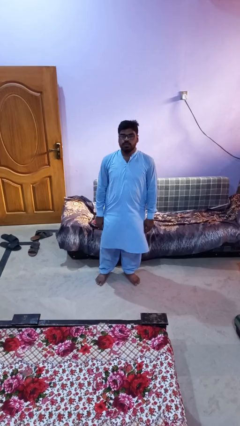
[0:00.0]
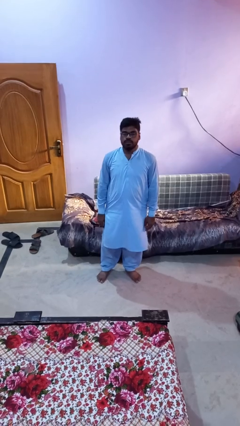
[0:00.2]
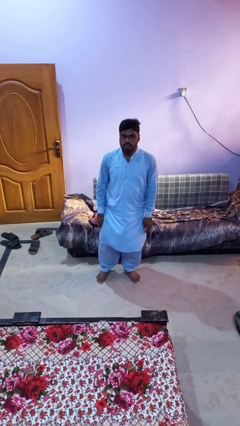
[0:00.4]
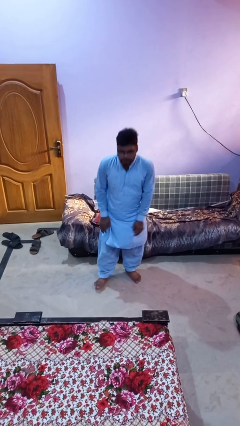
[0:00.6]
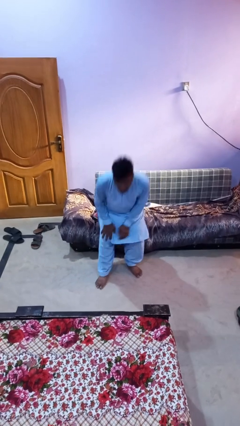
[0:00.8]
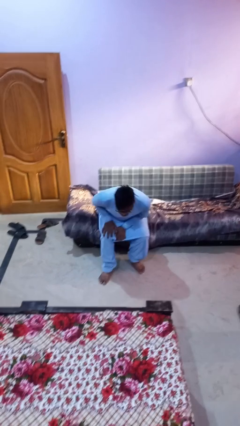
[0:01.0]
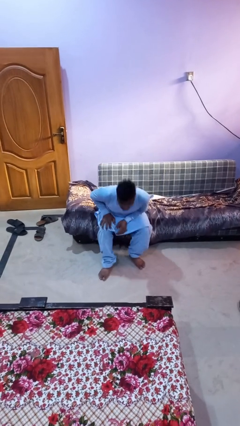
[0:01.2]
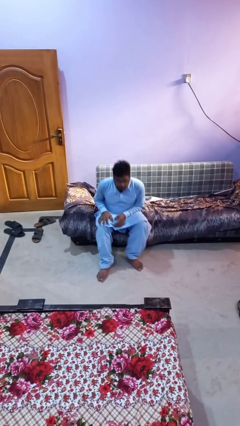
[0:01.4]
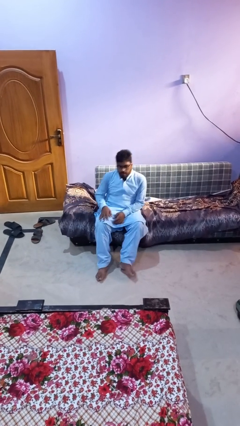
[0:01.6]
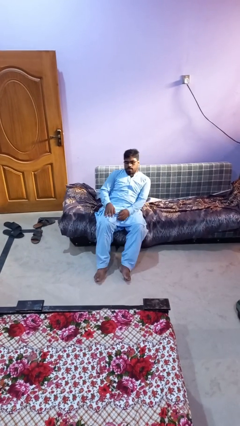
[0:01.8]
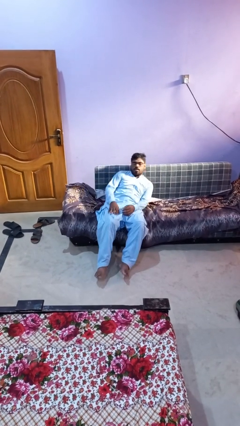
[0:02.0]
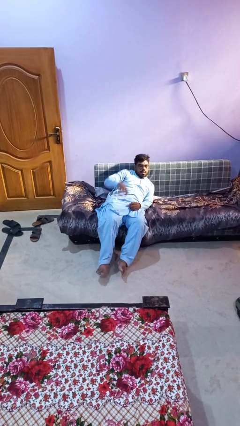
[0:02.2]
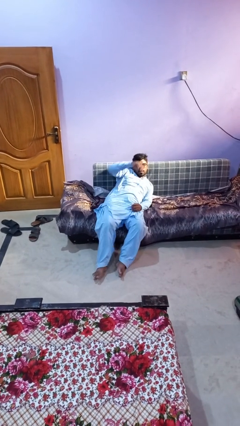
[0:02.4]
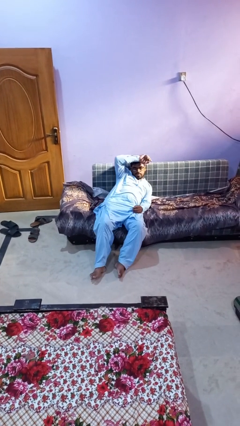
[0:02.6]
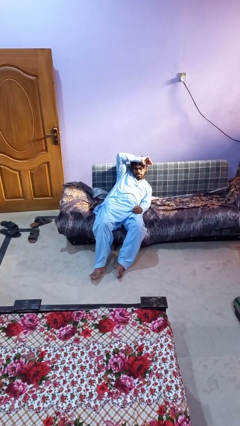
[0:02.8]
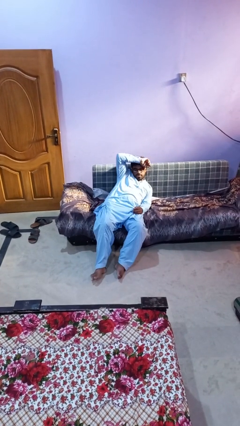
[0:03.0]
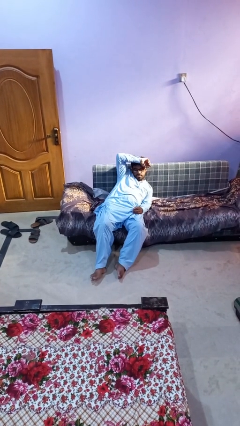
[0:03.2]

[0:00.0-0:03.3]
person lies down on couch

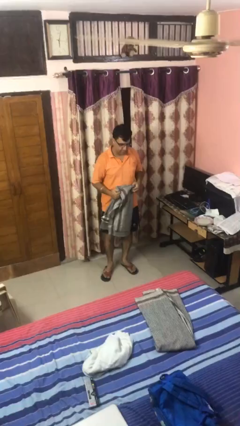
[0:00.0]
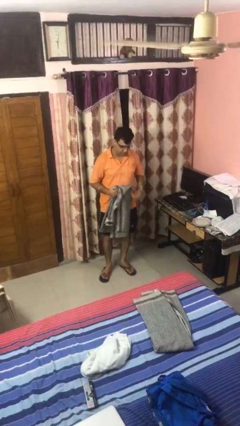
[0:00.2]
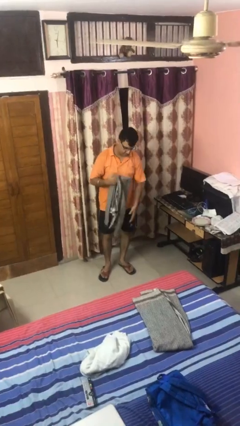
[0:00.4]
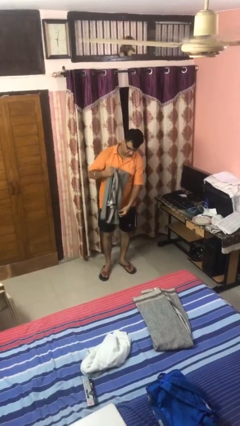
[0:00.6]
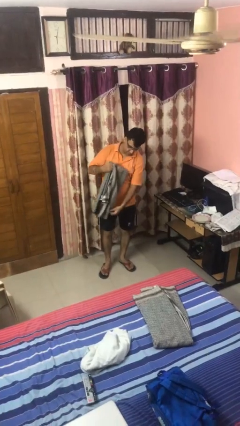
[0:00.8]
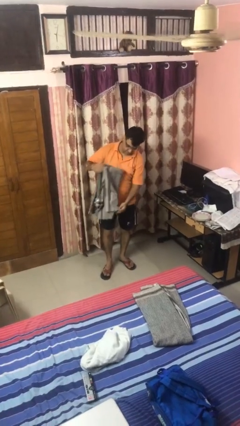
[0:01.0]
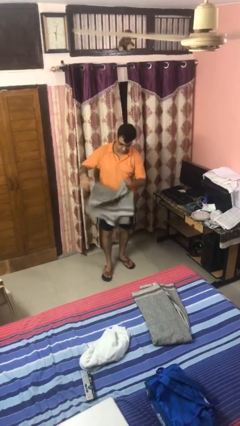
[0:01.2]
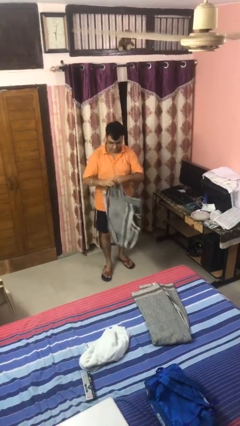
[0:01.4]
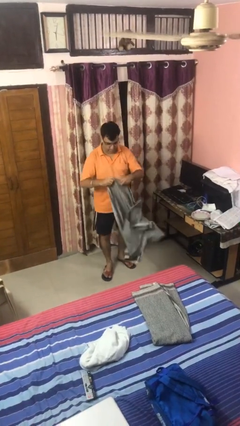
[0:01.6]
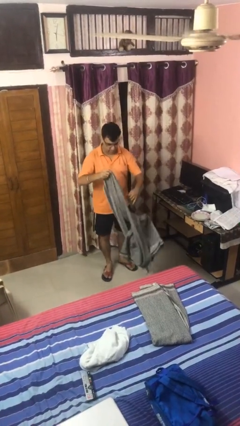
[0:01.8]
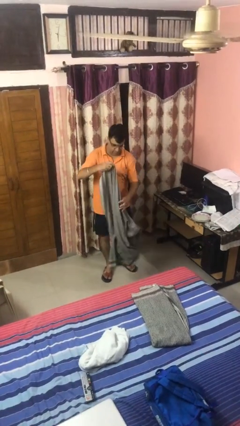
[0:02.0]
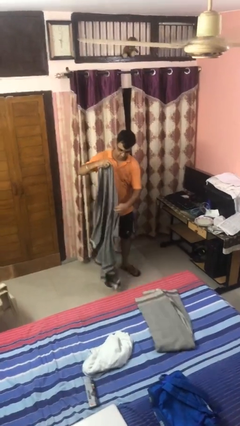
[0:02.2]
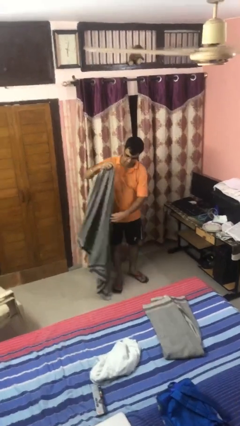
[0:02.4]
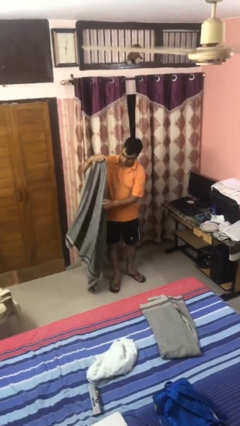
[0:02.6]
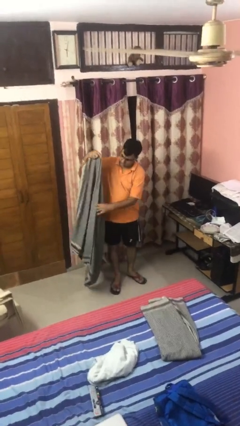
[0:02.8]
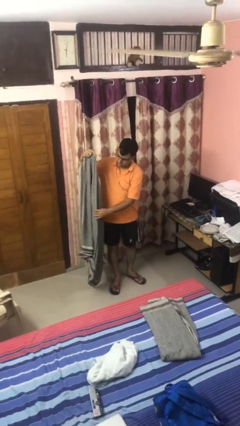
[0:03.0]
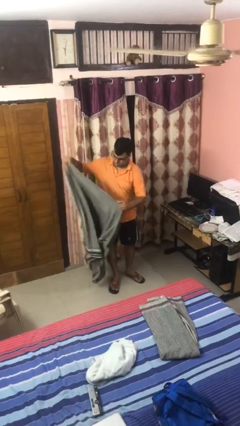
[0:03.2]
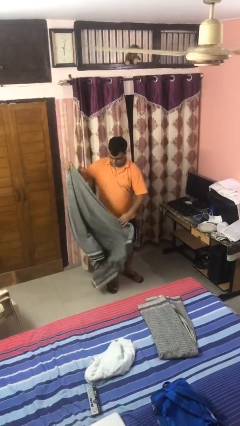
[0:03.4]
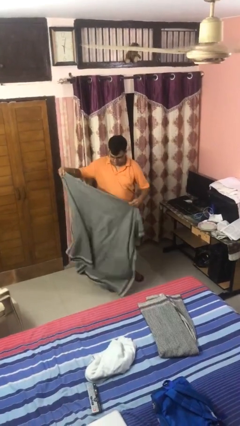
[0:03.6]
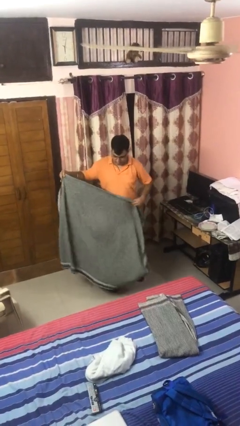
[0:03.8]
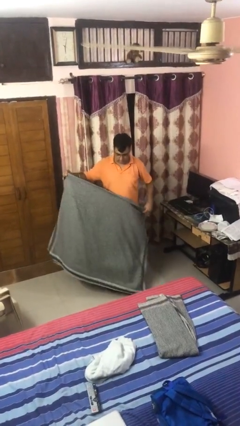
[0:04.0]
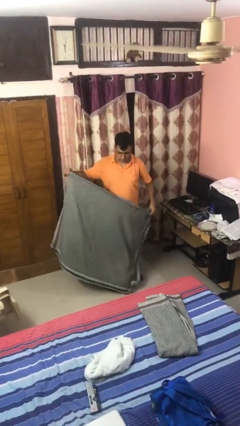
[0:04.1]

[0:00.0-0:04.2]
person unfolds blanket

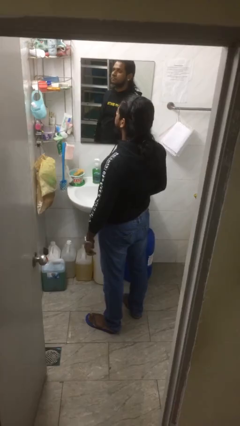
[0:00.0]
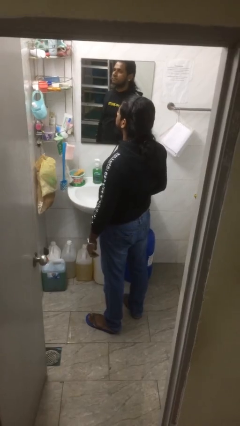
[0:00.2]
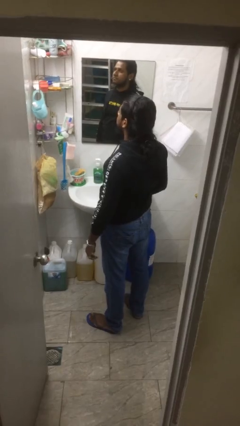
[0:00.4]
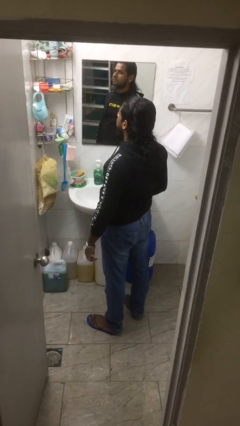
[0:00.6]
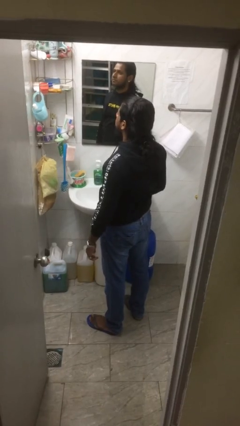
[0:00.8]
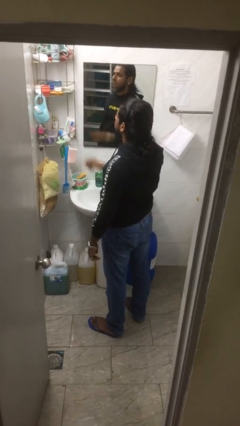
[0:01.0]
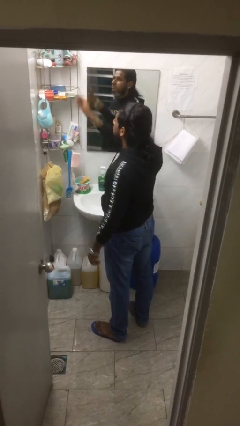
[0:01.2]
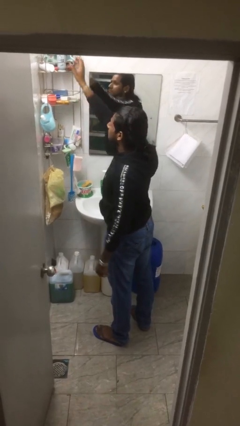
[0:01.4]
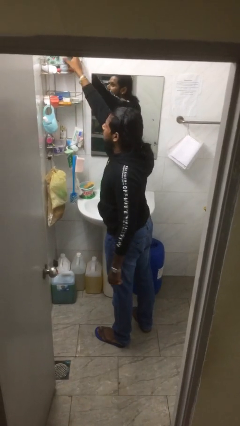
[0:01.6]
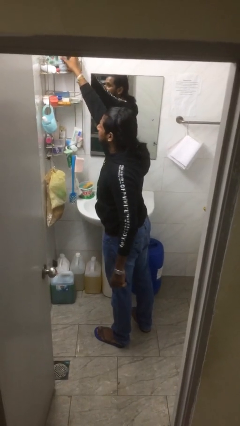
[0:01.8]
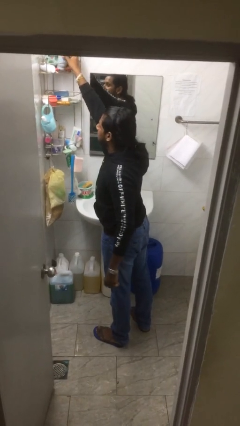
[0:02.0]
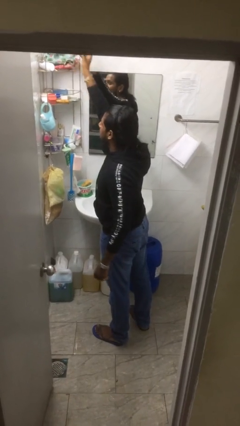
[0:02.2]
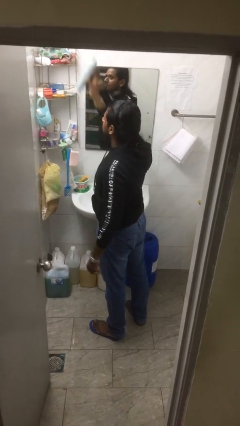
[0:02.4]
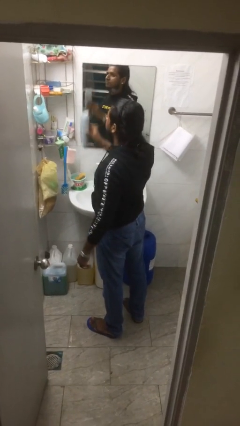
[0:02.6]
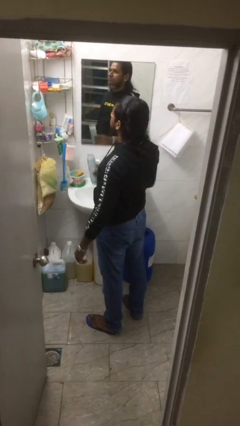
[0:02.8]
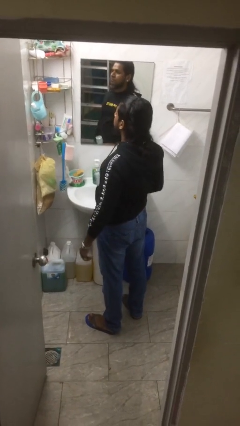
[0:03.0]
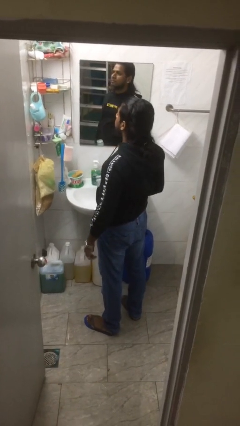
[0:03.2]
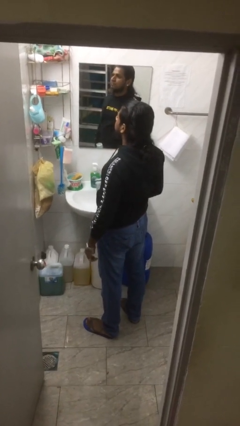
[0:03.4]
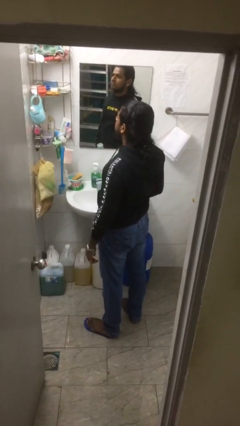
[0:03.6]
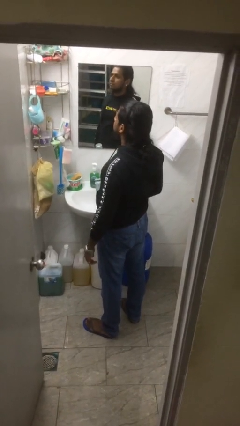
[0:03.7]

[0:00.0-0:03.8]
person picks up object from countertop

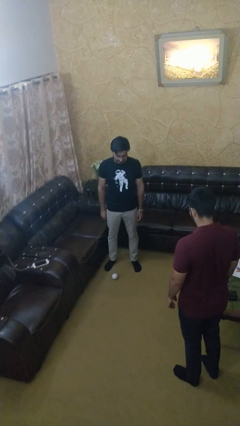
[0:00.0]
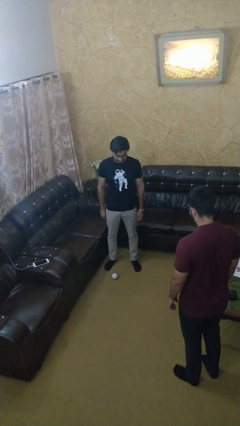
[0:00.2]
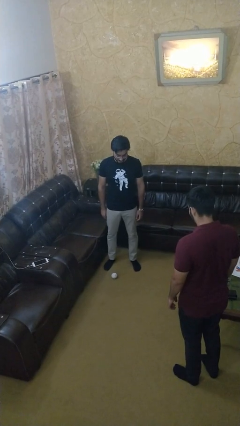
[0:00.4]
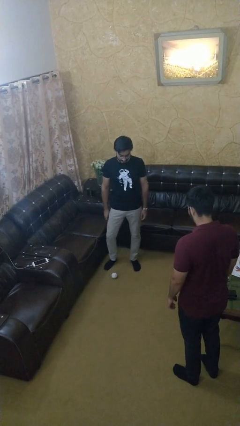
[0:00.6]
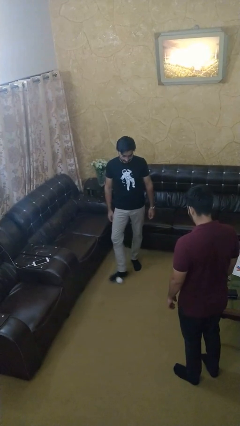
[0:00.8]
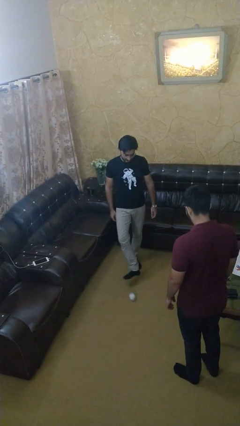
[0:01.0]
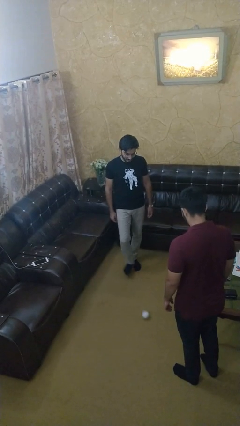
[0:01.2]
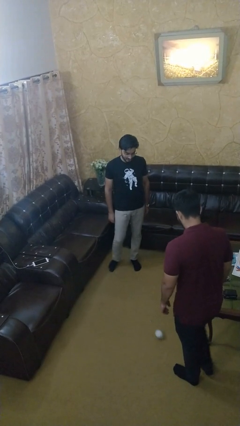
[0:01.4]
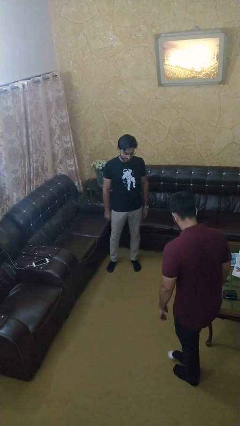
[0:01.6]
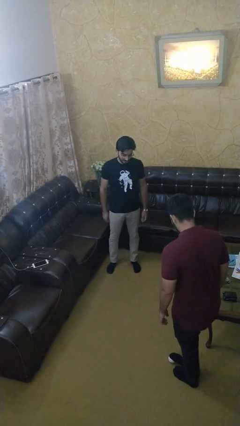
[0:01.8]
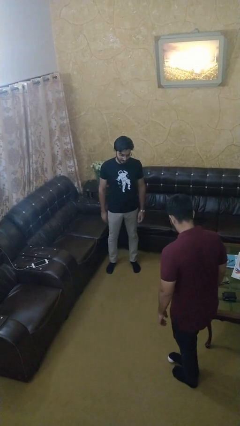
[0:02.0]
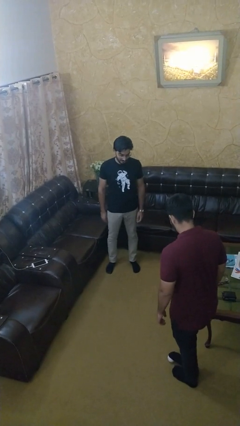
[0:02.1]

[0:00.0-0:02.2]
person kicks object to person

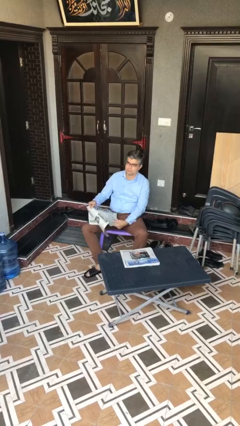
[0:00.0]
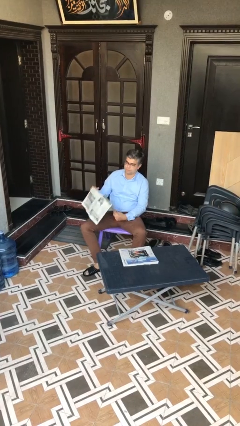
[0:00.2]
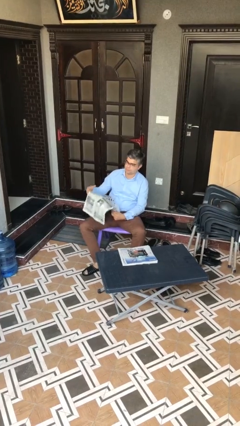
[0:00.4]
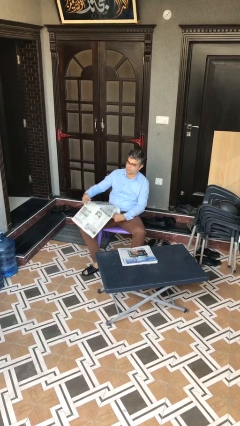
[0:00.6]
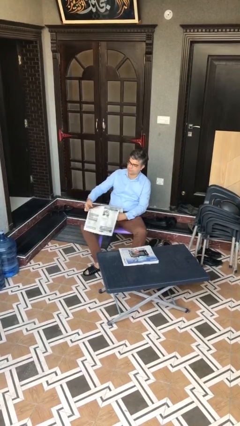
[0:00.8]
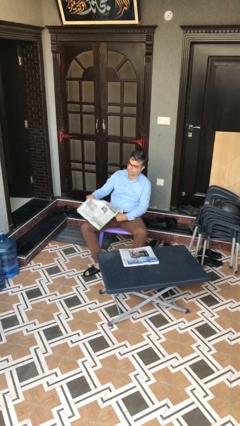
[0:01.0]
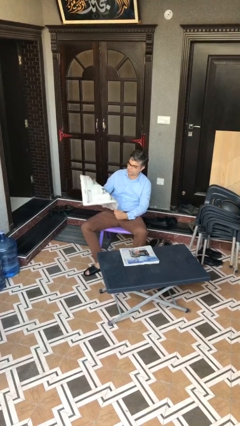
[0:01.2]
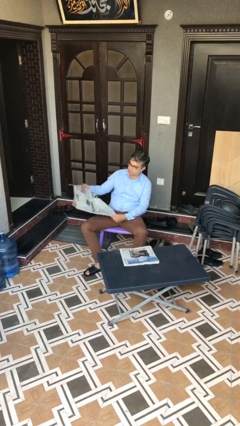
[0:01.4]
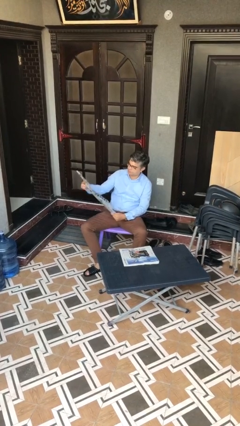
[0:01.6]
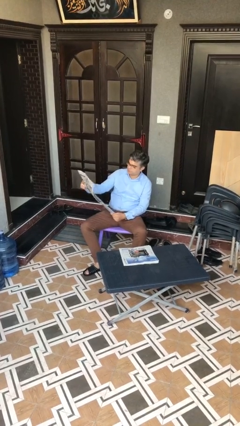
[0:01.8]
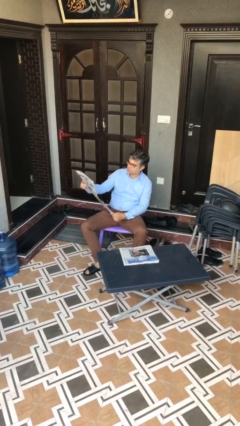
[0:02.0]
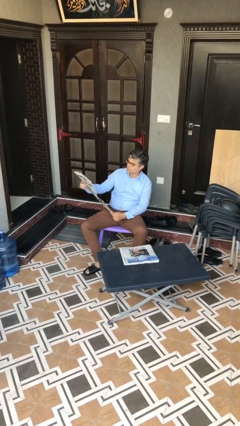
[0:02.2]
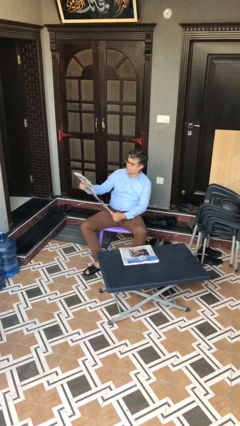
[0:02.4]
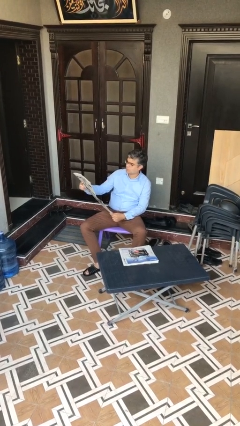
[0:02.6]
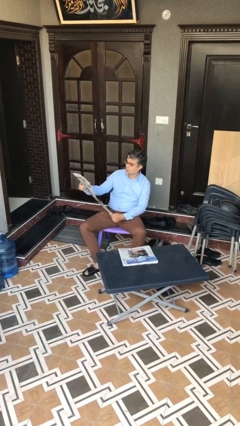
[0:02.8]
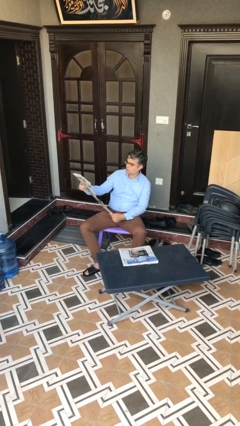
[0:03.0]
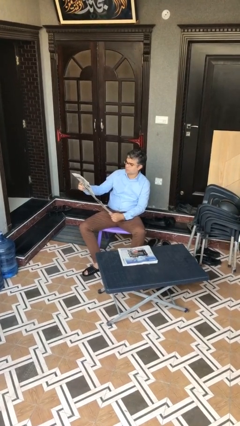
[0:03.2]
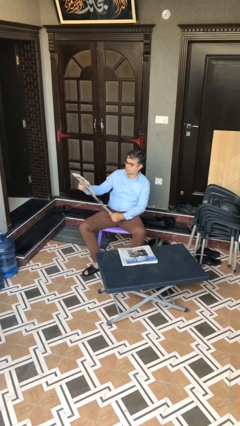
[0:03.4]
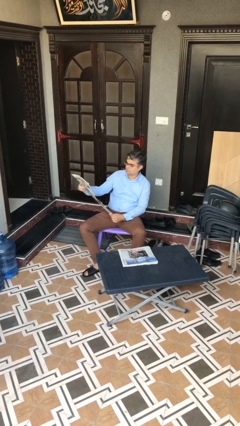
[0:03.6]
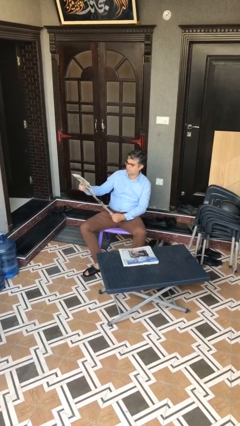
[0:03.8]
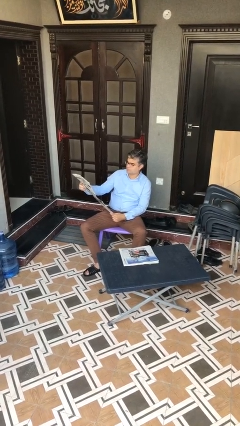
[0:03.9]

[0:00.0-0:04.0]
person reads document

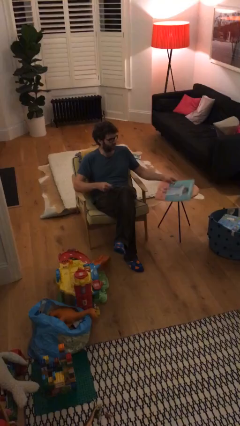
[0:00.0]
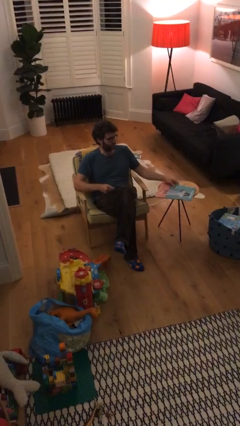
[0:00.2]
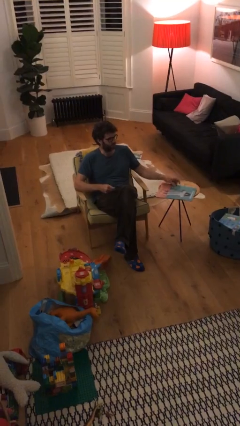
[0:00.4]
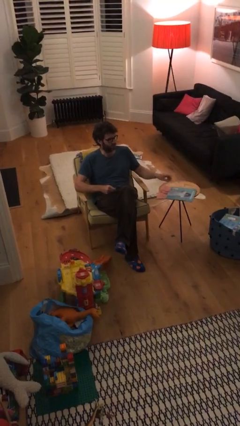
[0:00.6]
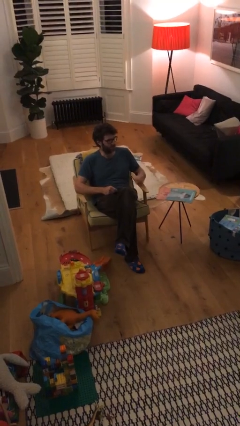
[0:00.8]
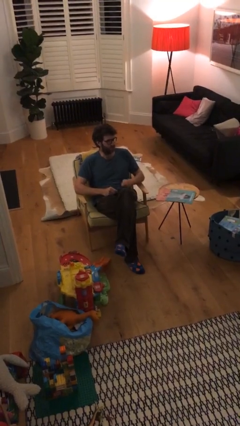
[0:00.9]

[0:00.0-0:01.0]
person puts down object on table
